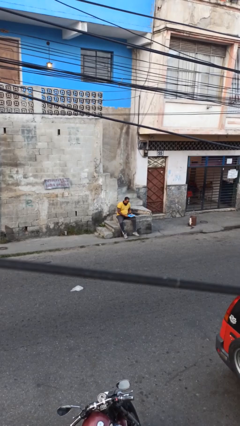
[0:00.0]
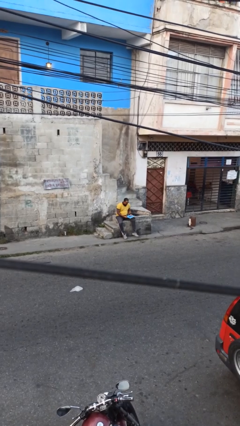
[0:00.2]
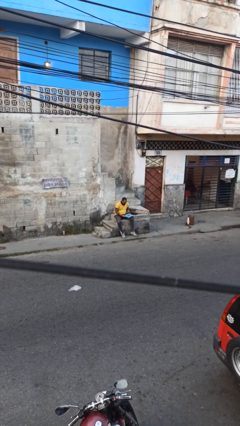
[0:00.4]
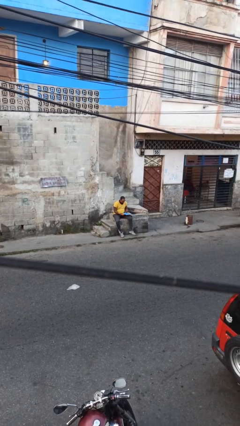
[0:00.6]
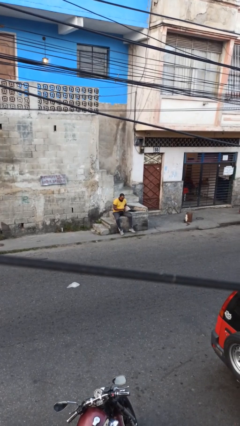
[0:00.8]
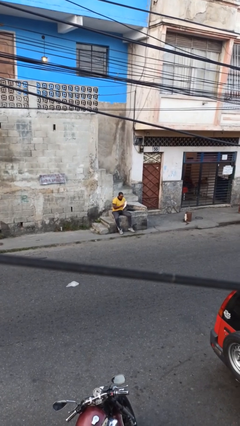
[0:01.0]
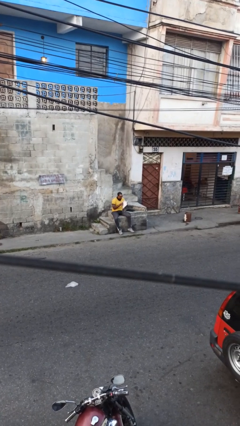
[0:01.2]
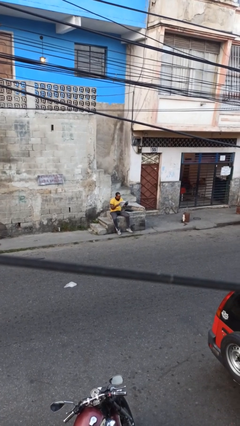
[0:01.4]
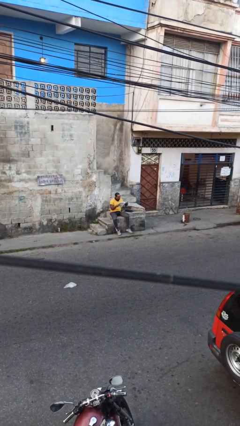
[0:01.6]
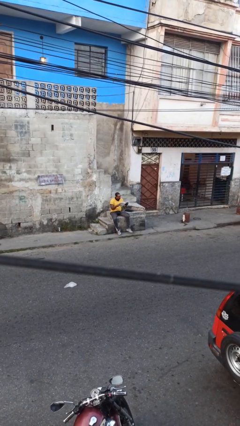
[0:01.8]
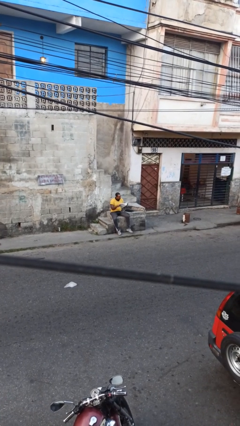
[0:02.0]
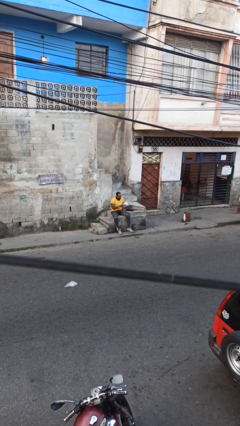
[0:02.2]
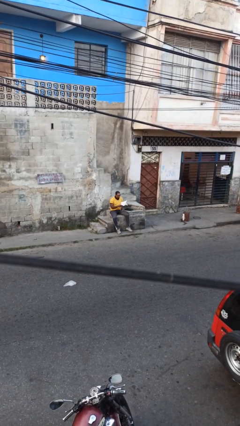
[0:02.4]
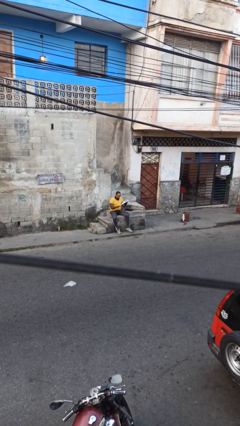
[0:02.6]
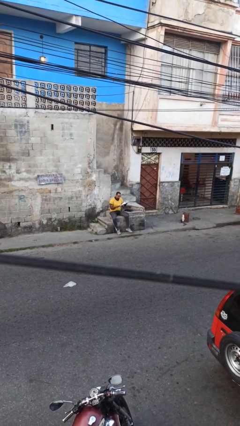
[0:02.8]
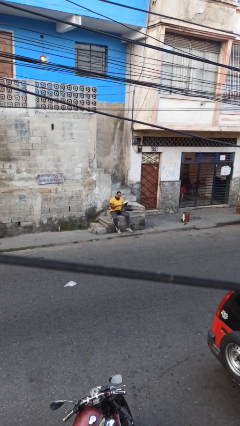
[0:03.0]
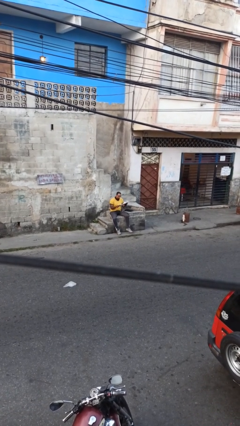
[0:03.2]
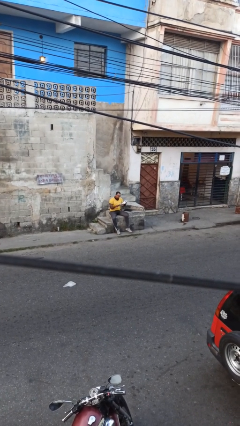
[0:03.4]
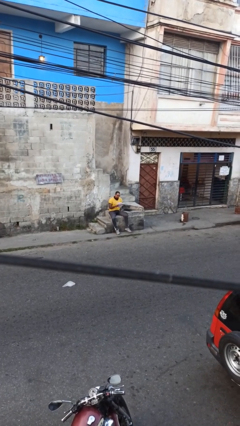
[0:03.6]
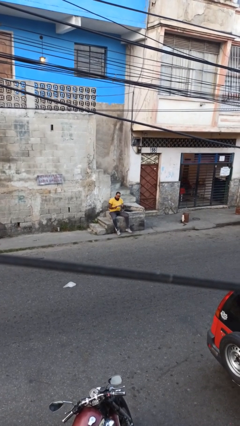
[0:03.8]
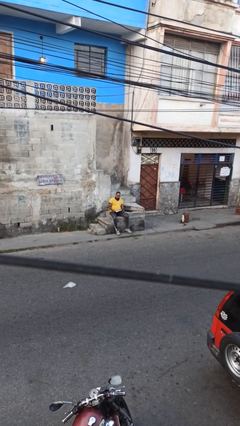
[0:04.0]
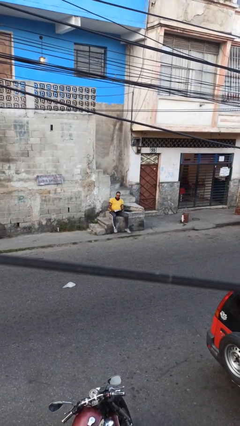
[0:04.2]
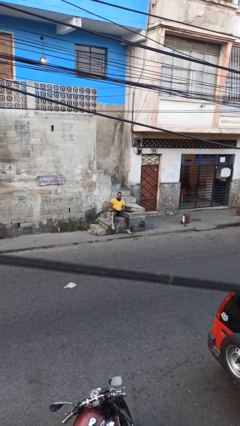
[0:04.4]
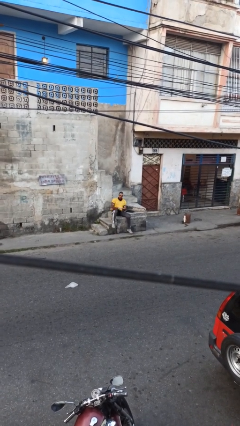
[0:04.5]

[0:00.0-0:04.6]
person reads document

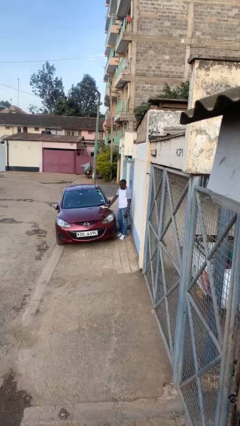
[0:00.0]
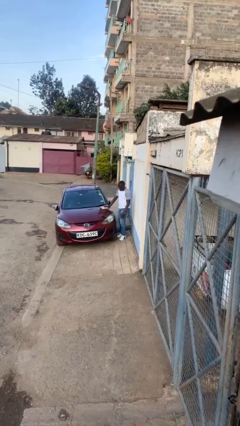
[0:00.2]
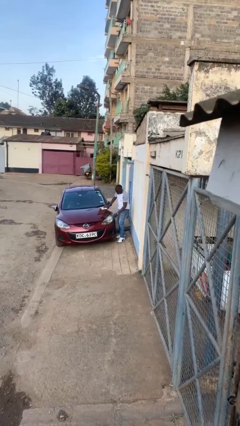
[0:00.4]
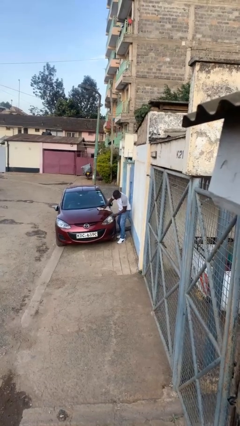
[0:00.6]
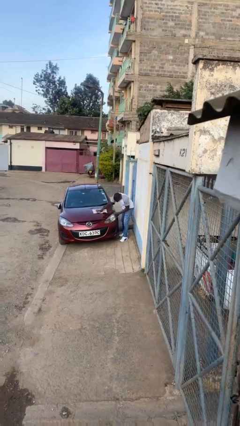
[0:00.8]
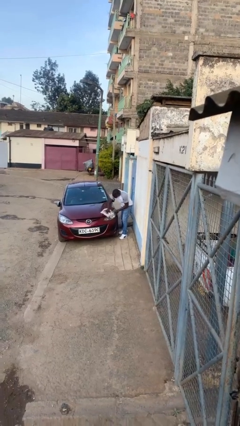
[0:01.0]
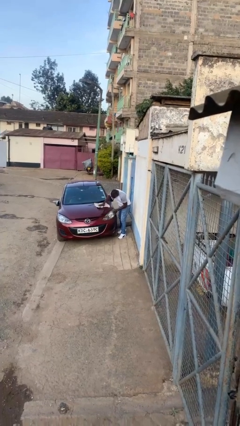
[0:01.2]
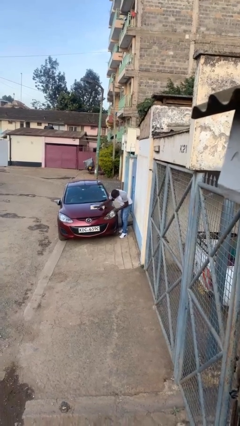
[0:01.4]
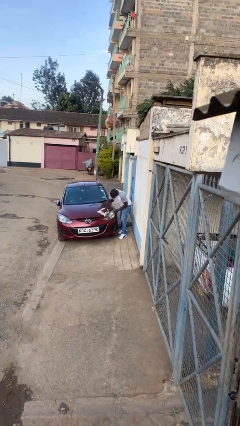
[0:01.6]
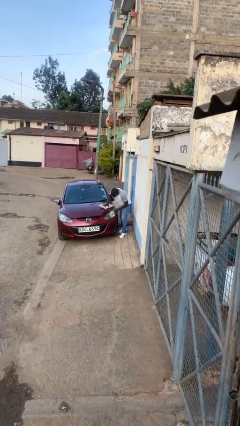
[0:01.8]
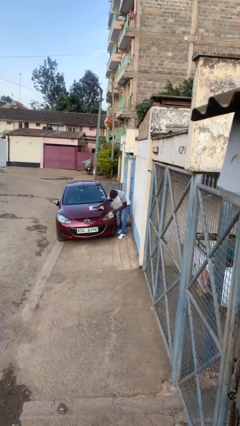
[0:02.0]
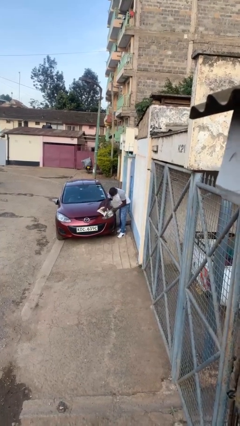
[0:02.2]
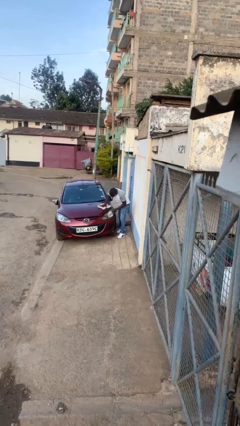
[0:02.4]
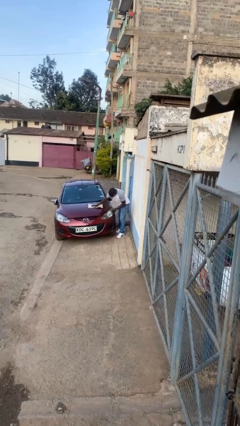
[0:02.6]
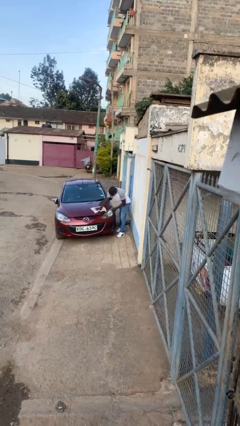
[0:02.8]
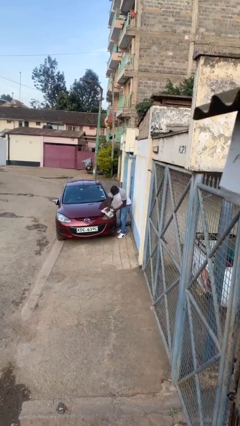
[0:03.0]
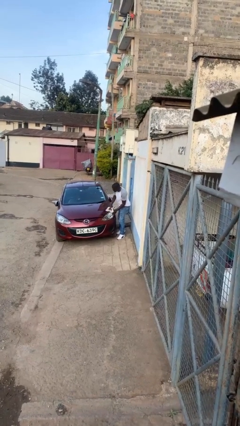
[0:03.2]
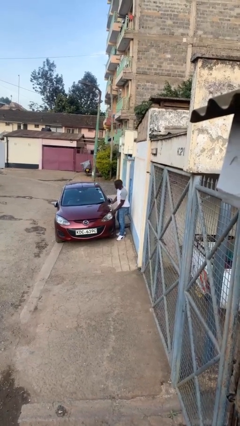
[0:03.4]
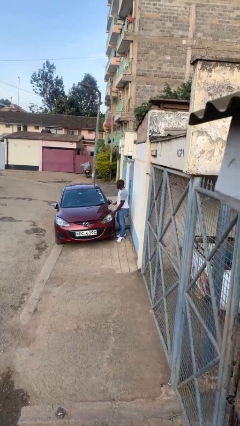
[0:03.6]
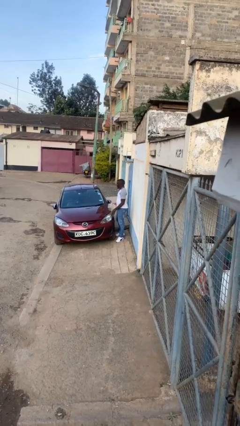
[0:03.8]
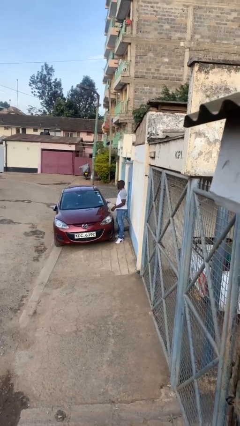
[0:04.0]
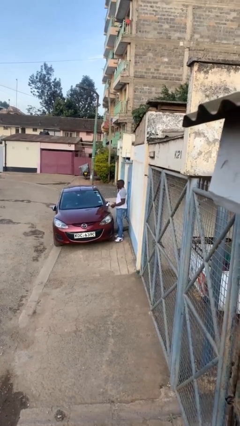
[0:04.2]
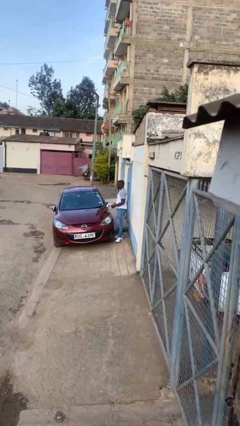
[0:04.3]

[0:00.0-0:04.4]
person polishes car with rag

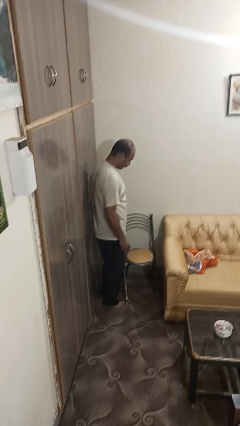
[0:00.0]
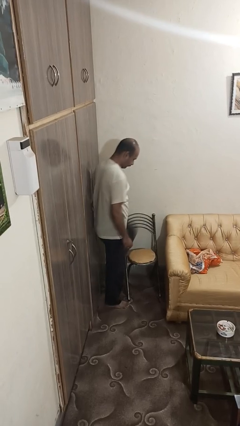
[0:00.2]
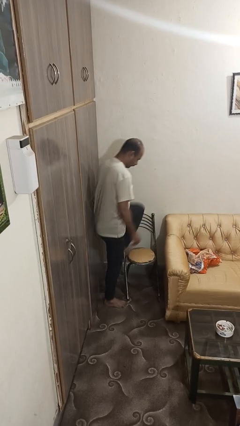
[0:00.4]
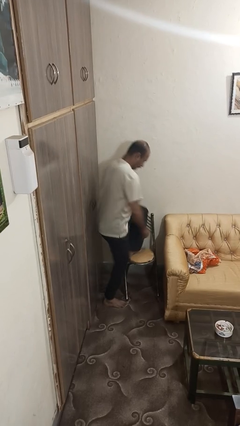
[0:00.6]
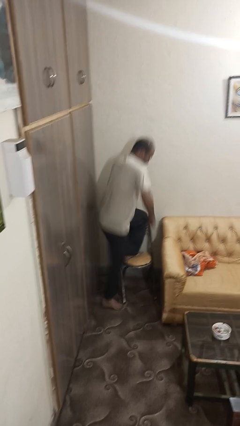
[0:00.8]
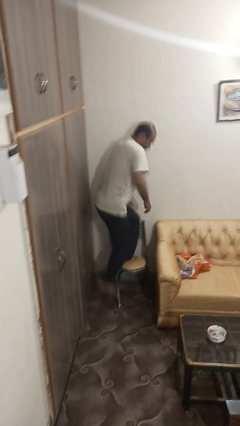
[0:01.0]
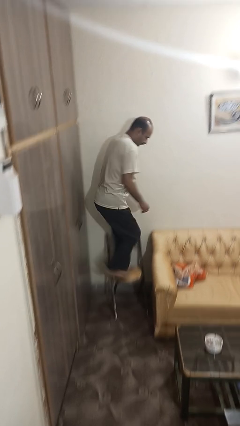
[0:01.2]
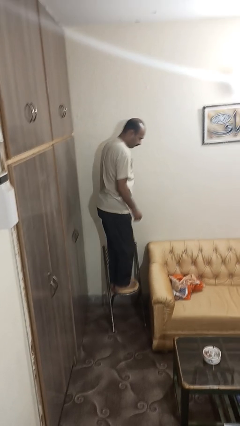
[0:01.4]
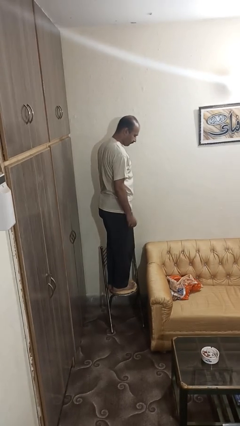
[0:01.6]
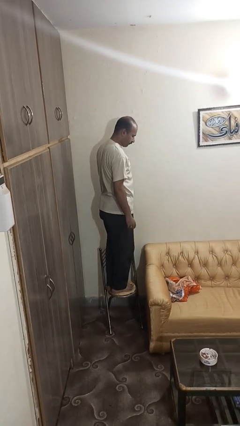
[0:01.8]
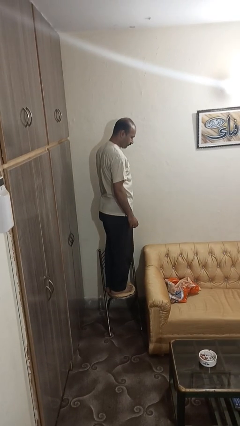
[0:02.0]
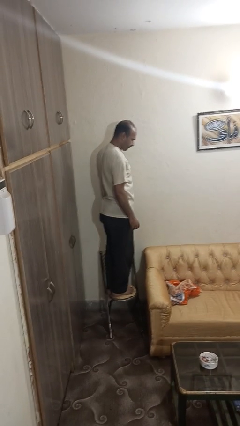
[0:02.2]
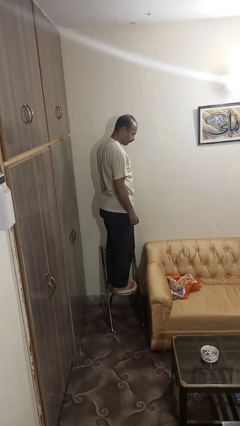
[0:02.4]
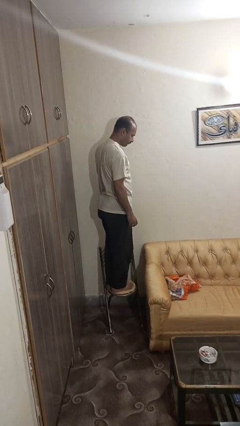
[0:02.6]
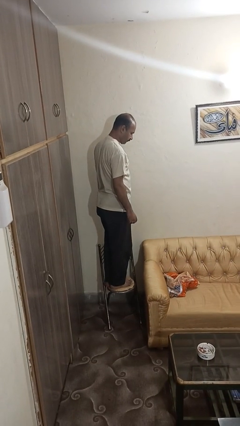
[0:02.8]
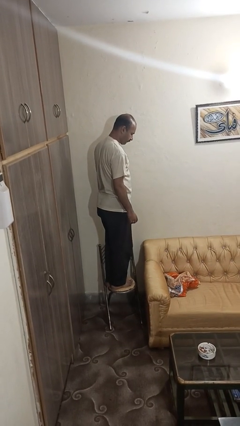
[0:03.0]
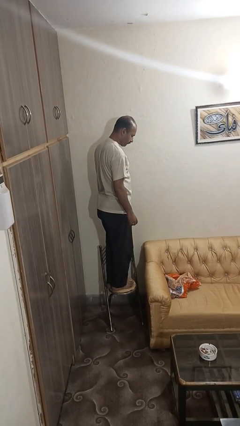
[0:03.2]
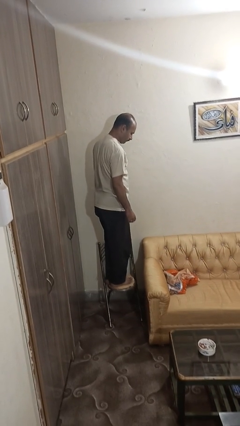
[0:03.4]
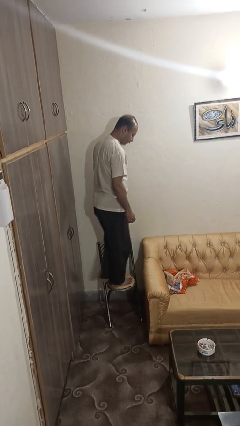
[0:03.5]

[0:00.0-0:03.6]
person climbs on chair

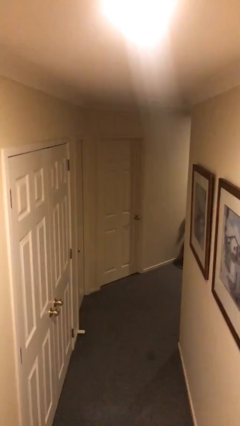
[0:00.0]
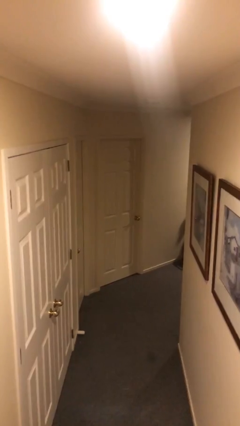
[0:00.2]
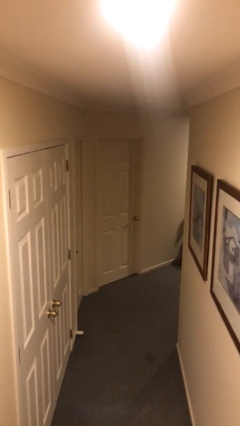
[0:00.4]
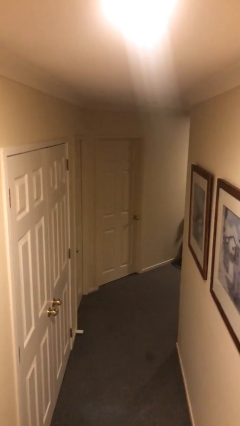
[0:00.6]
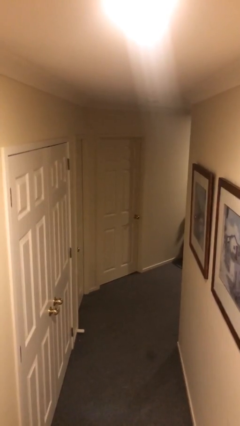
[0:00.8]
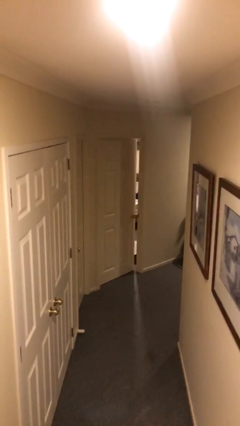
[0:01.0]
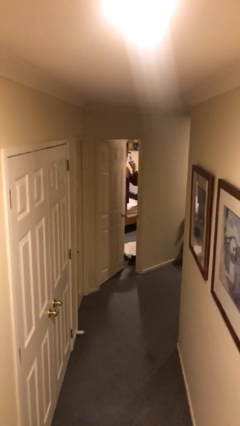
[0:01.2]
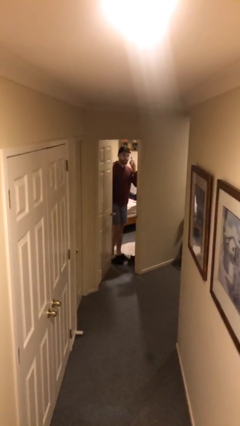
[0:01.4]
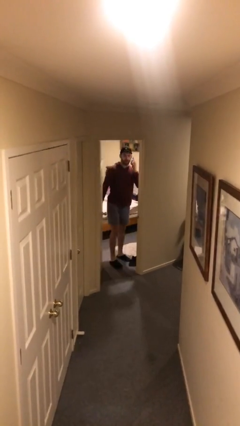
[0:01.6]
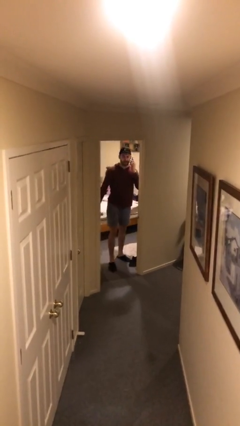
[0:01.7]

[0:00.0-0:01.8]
person opens facility door

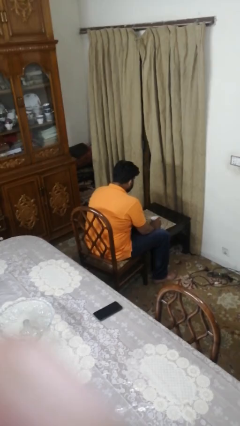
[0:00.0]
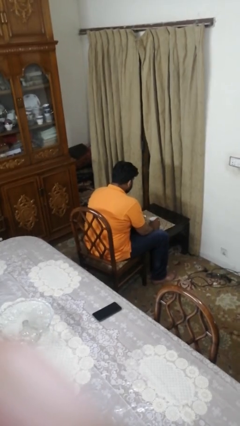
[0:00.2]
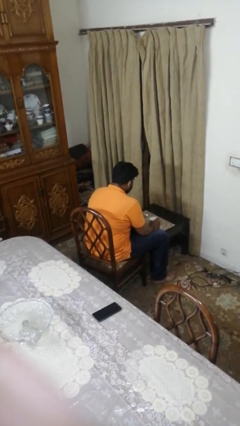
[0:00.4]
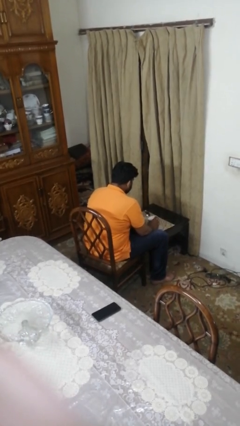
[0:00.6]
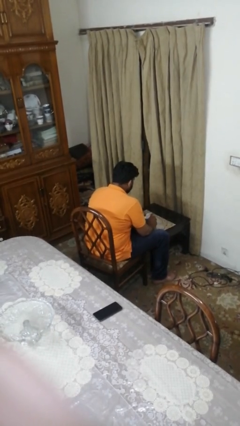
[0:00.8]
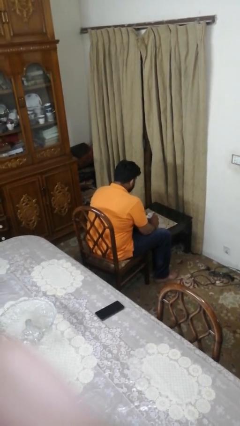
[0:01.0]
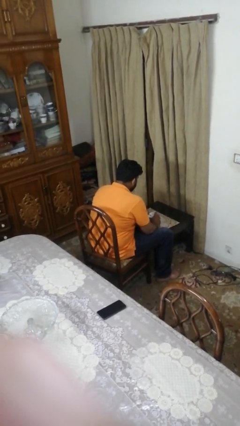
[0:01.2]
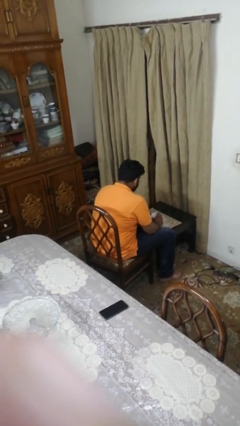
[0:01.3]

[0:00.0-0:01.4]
person stirs mug

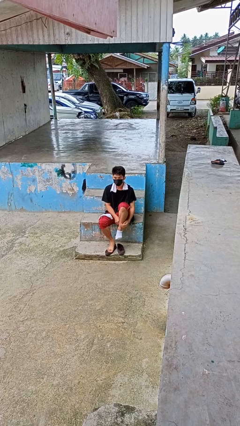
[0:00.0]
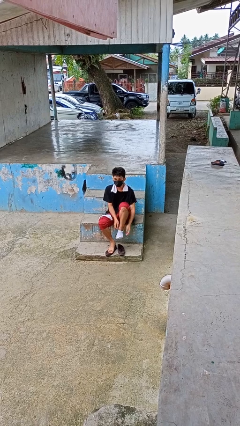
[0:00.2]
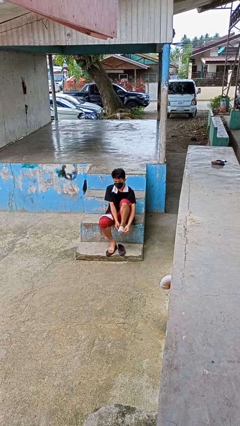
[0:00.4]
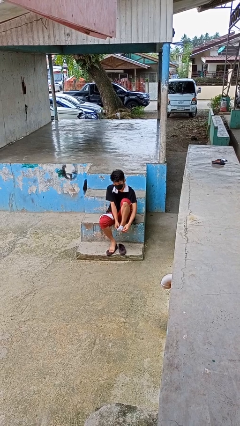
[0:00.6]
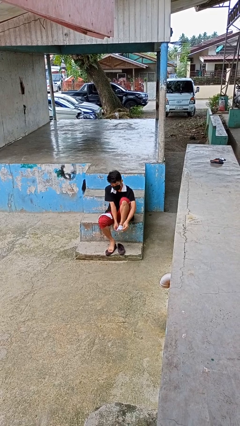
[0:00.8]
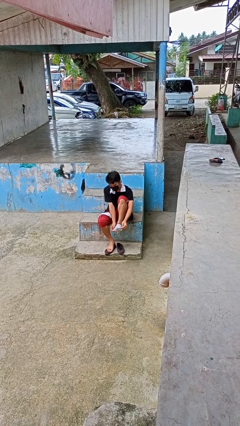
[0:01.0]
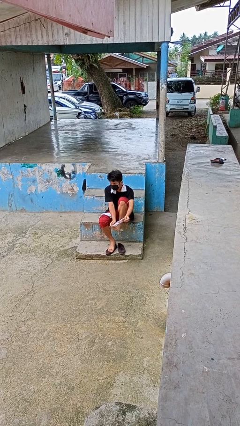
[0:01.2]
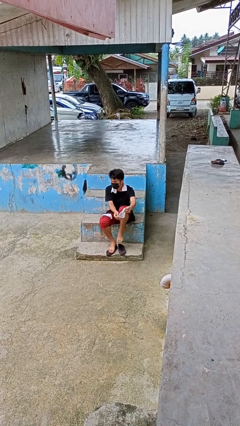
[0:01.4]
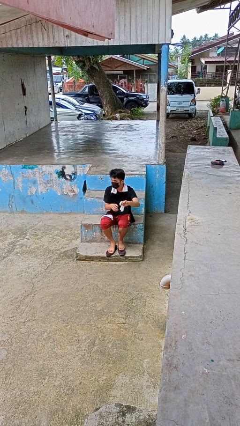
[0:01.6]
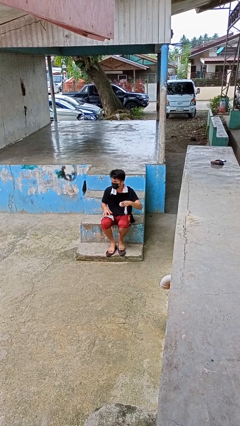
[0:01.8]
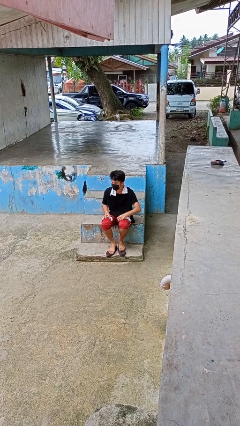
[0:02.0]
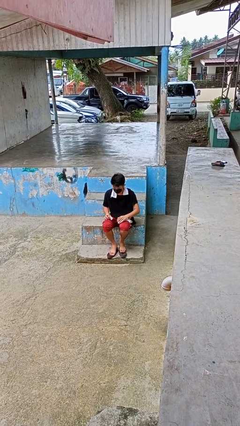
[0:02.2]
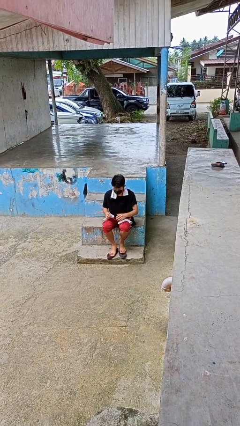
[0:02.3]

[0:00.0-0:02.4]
person takes off socks
